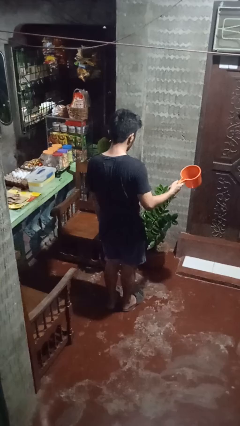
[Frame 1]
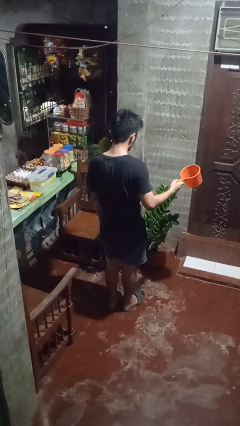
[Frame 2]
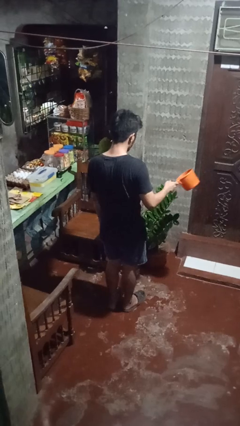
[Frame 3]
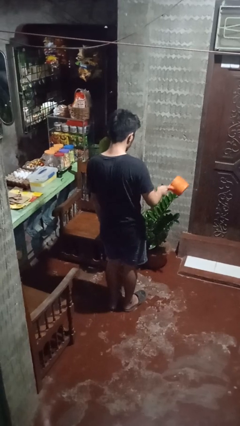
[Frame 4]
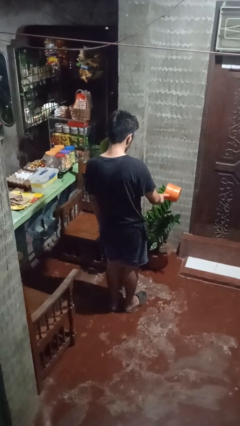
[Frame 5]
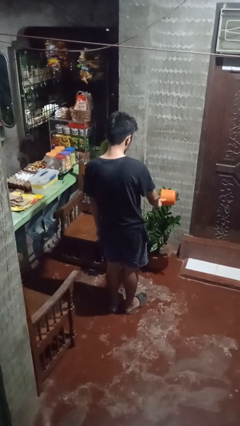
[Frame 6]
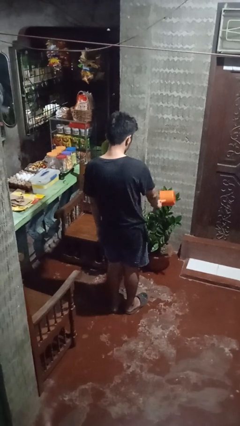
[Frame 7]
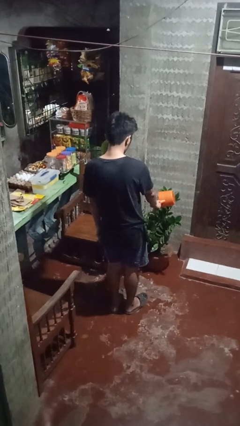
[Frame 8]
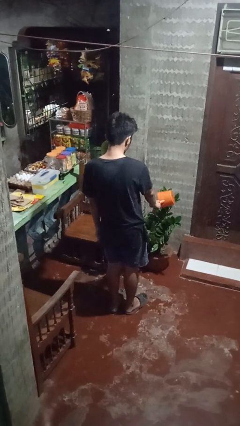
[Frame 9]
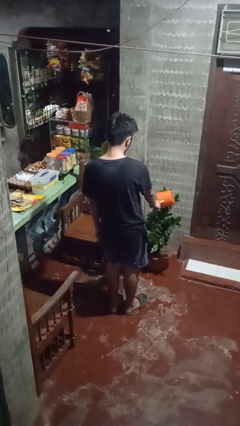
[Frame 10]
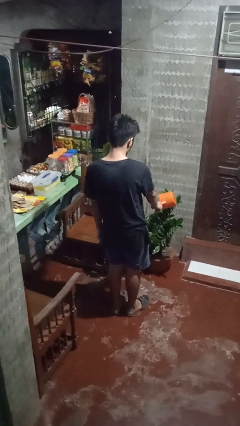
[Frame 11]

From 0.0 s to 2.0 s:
person waters houseplant

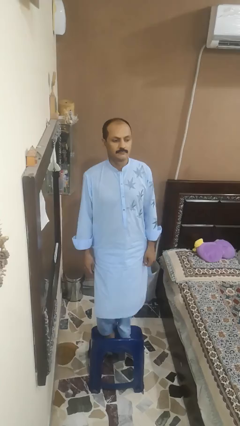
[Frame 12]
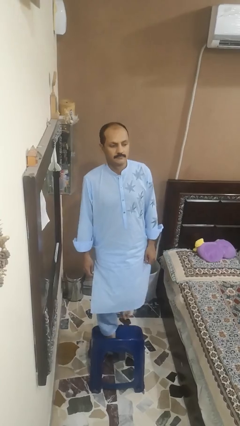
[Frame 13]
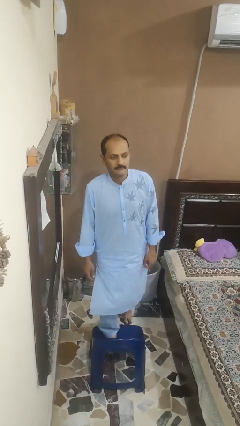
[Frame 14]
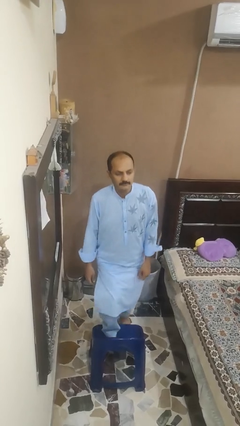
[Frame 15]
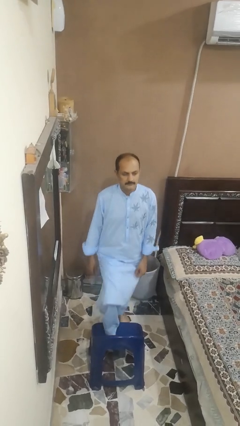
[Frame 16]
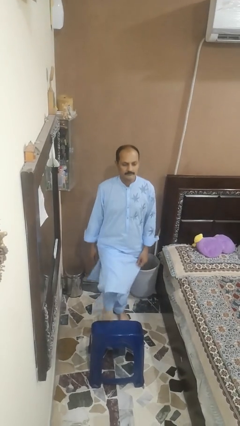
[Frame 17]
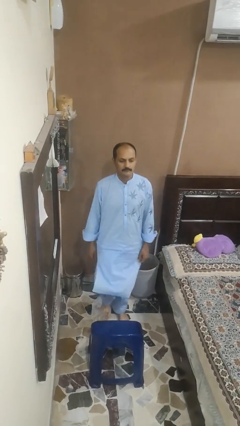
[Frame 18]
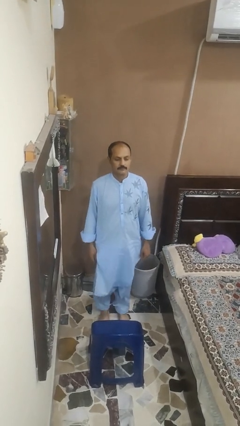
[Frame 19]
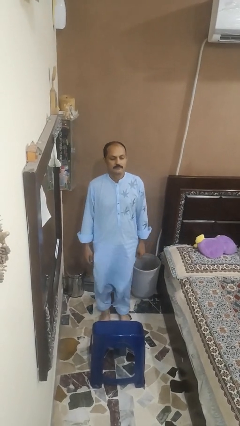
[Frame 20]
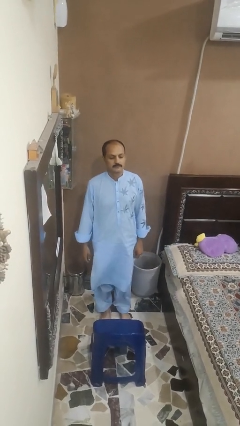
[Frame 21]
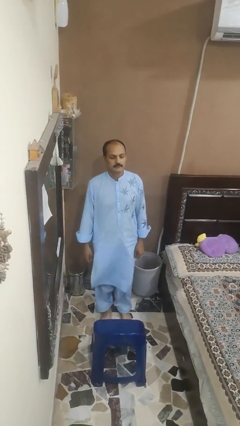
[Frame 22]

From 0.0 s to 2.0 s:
person climbs off chair

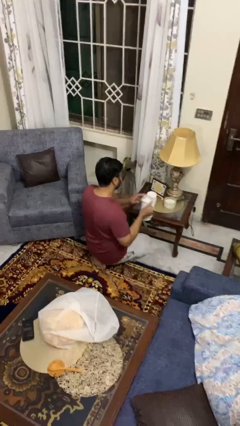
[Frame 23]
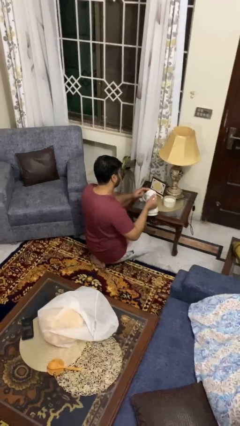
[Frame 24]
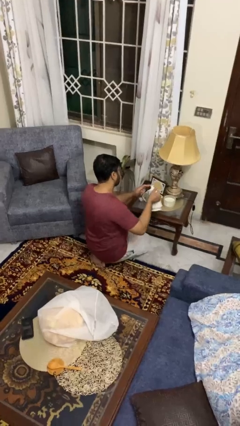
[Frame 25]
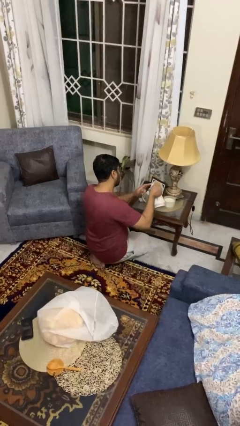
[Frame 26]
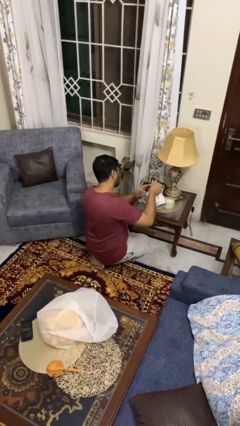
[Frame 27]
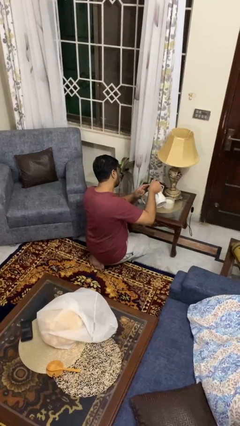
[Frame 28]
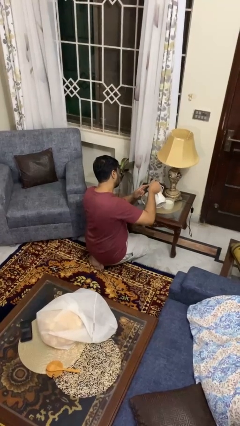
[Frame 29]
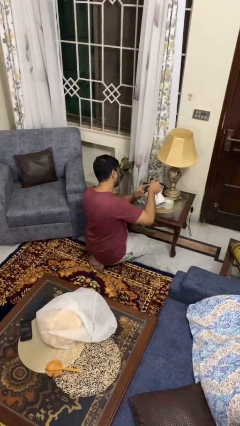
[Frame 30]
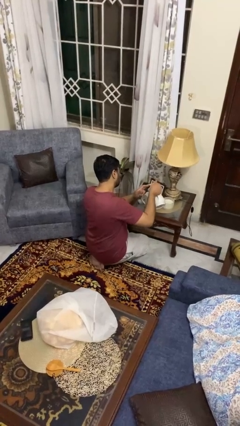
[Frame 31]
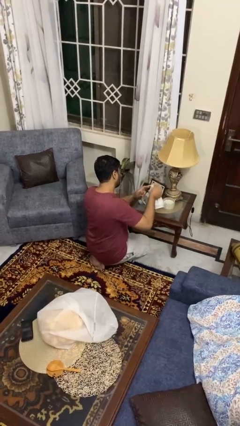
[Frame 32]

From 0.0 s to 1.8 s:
person pours coffee into mug

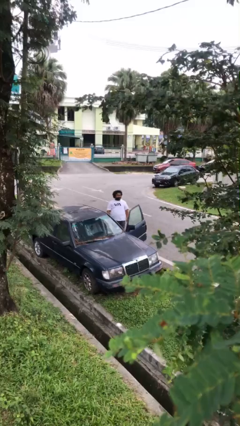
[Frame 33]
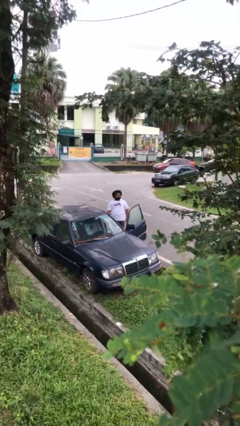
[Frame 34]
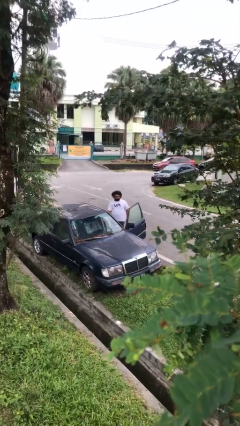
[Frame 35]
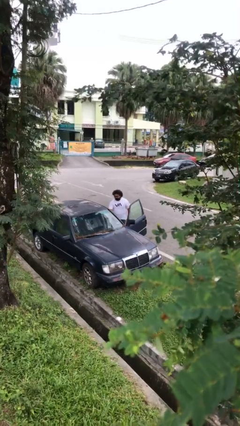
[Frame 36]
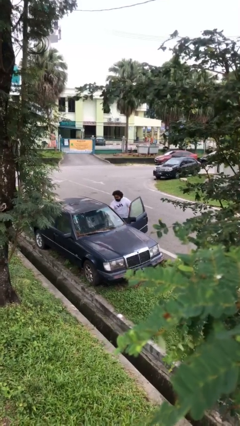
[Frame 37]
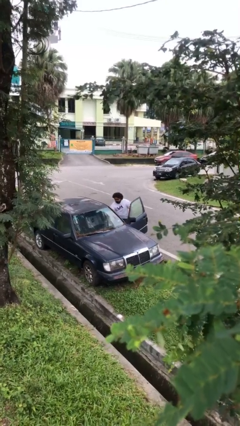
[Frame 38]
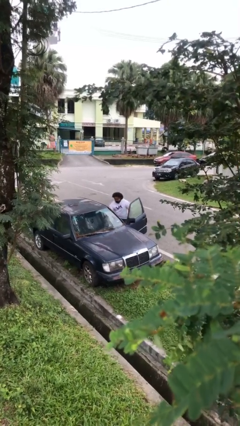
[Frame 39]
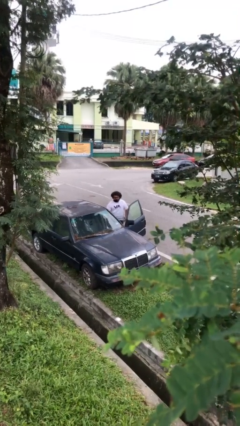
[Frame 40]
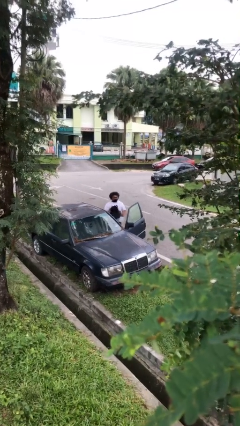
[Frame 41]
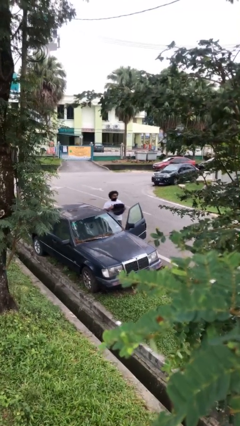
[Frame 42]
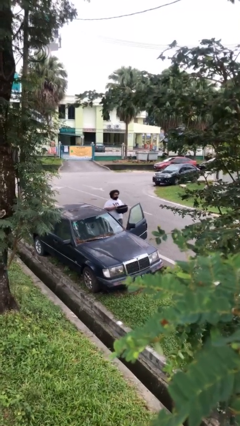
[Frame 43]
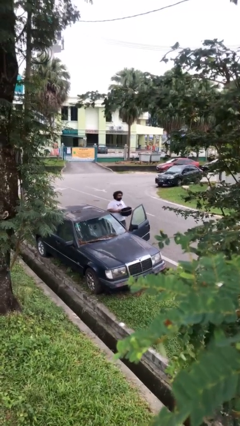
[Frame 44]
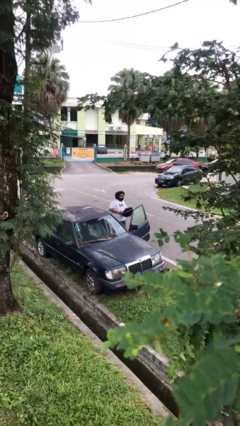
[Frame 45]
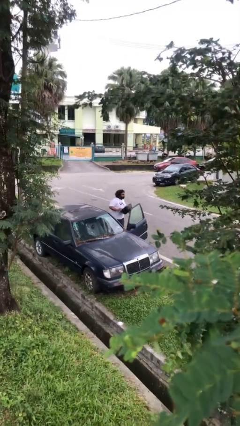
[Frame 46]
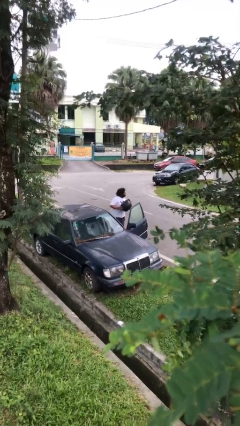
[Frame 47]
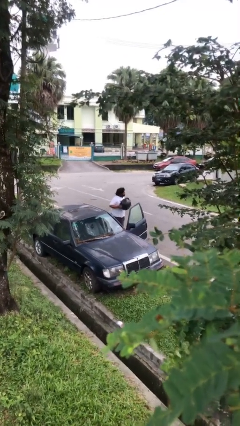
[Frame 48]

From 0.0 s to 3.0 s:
person unloads car

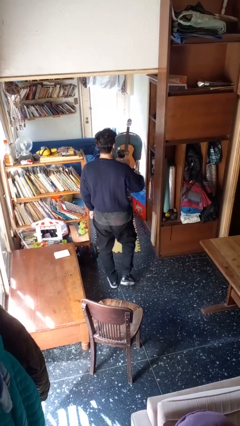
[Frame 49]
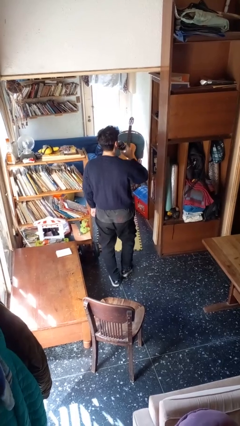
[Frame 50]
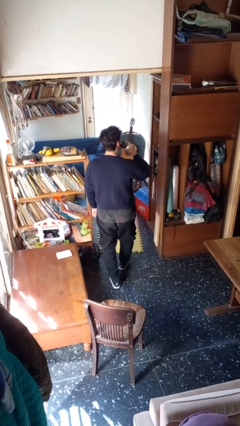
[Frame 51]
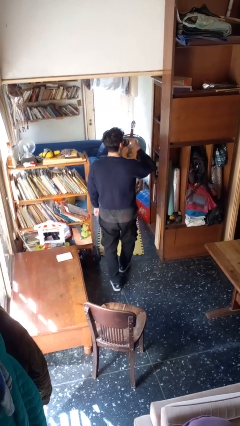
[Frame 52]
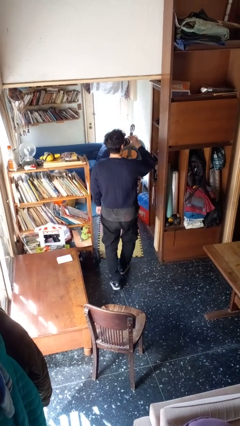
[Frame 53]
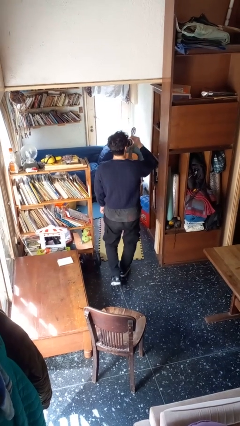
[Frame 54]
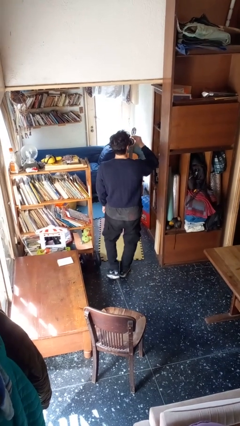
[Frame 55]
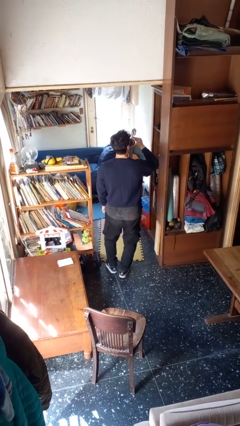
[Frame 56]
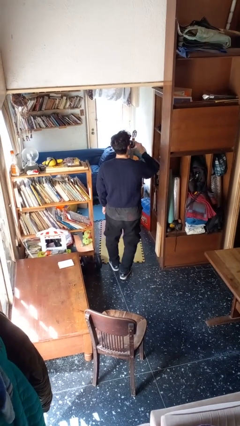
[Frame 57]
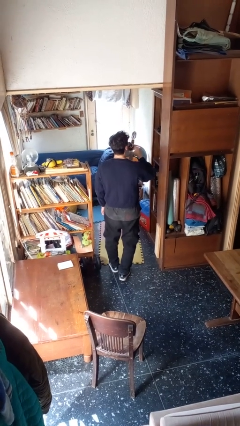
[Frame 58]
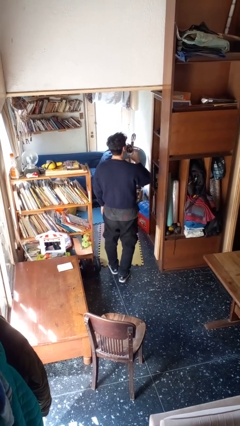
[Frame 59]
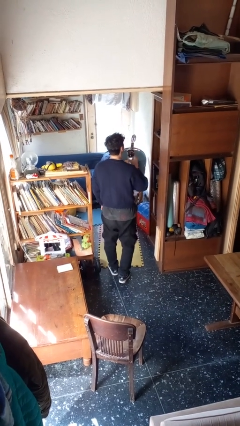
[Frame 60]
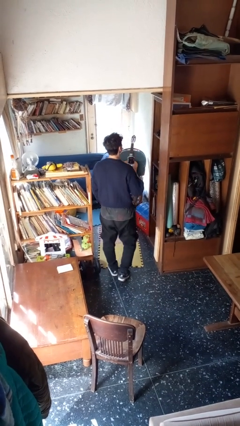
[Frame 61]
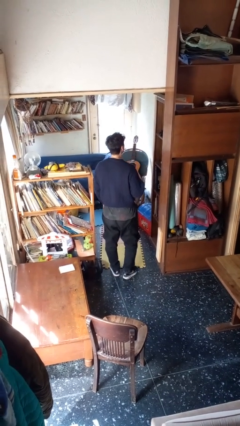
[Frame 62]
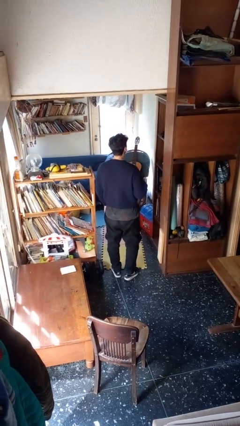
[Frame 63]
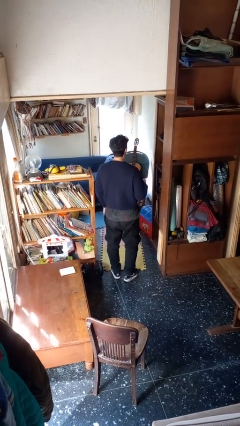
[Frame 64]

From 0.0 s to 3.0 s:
person drinks from bottle

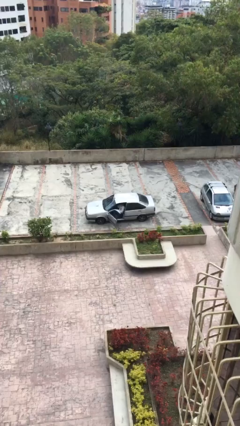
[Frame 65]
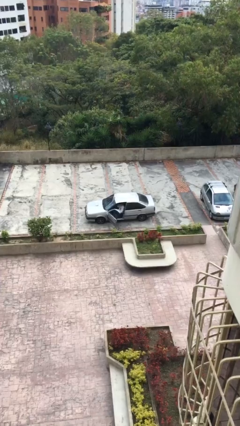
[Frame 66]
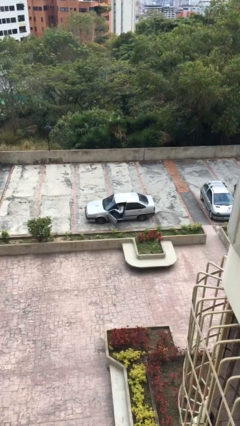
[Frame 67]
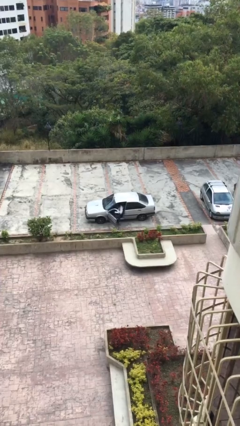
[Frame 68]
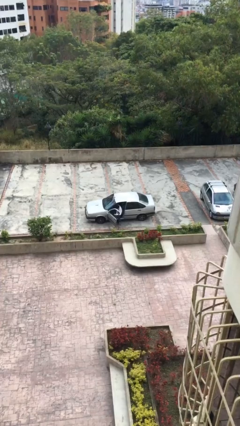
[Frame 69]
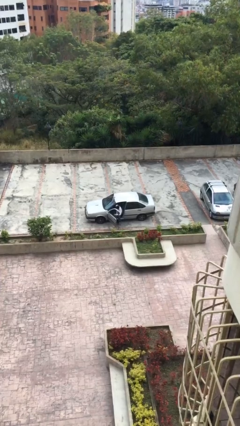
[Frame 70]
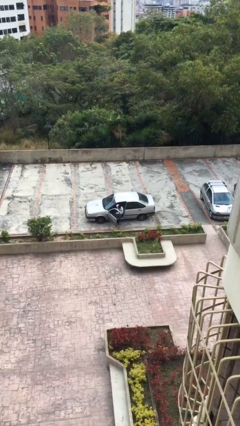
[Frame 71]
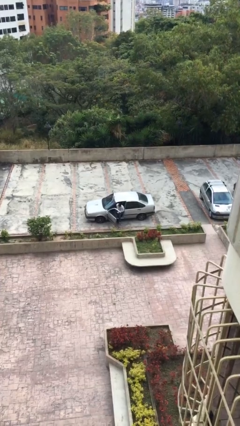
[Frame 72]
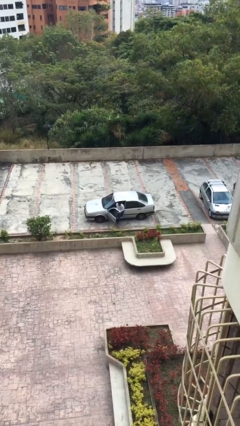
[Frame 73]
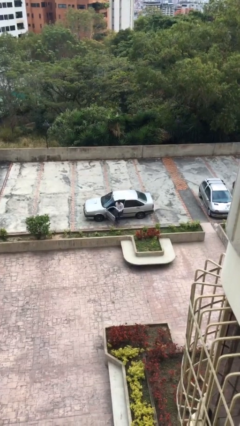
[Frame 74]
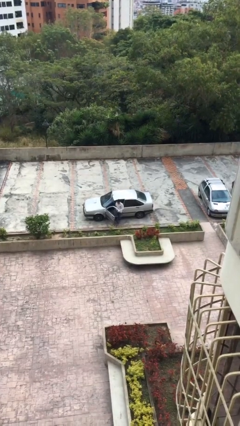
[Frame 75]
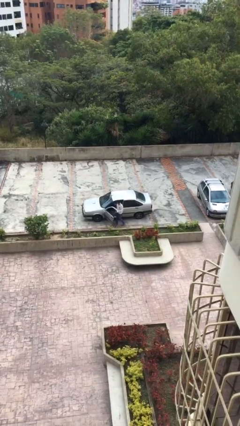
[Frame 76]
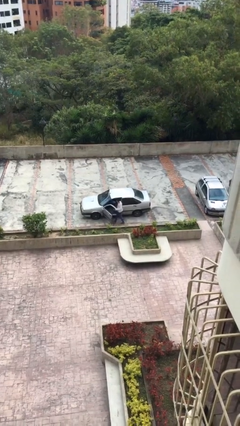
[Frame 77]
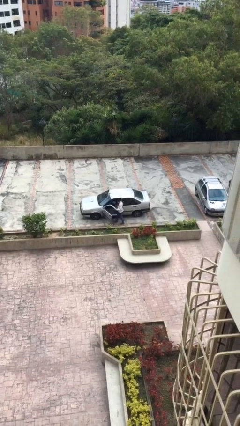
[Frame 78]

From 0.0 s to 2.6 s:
person exits car

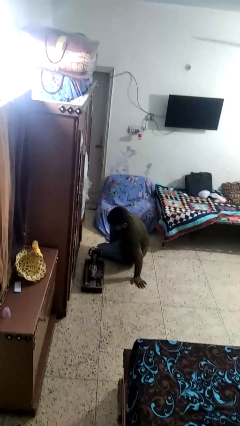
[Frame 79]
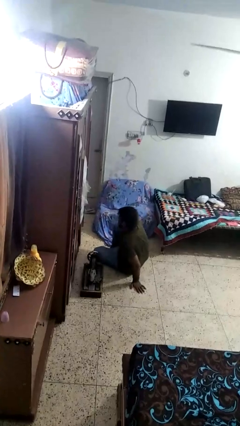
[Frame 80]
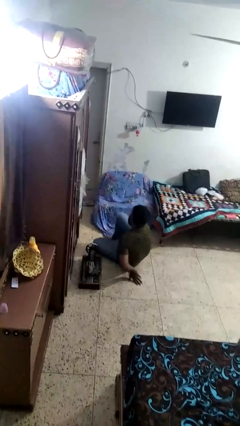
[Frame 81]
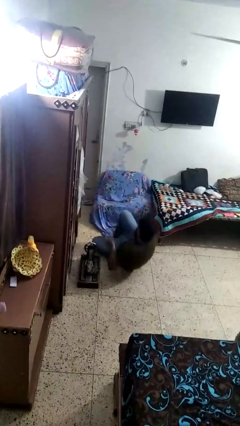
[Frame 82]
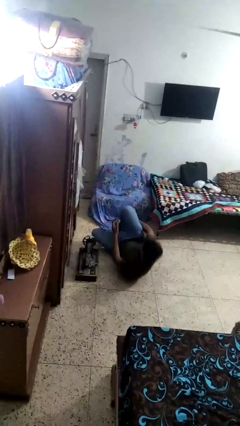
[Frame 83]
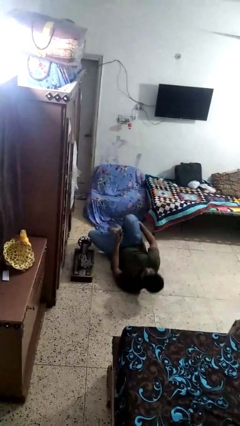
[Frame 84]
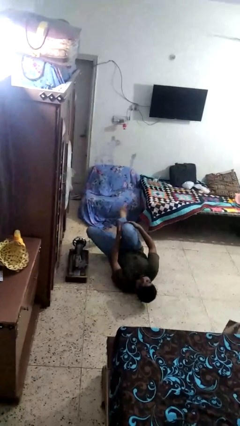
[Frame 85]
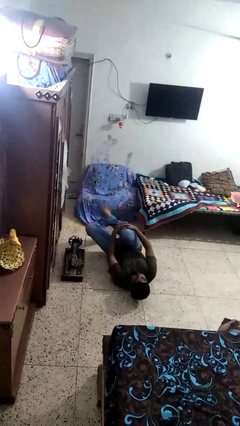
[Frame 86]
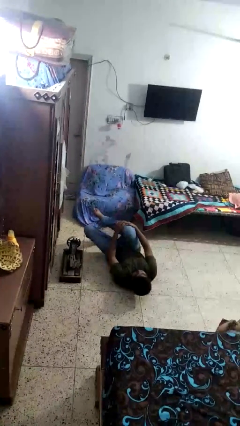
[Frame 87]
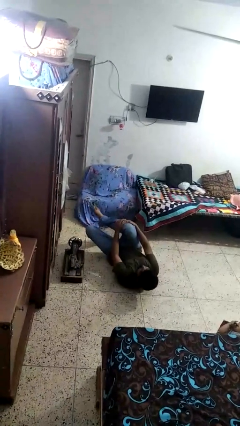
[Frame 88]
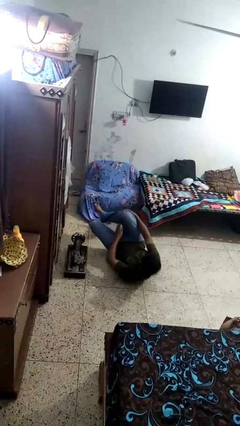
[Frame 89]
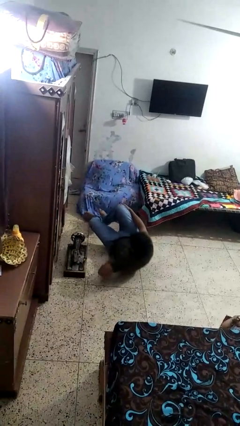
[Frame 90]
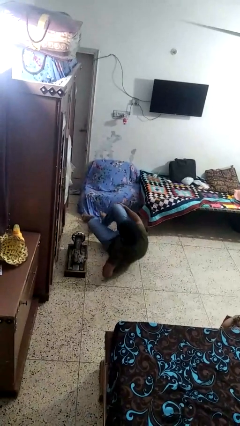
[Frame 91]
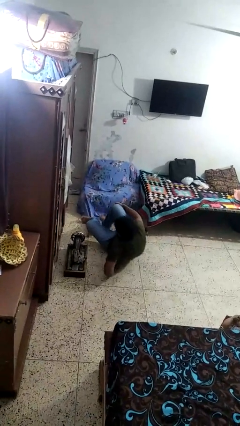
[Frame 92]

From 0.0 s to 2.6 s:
person lies down on floor
